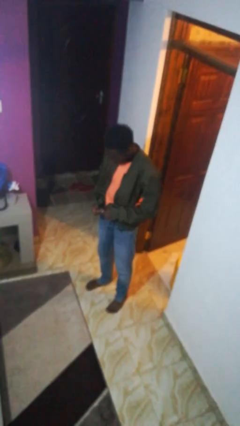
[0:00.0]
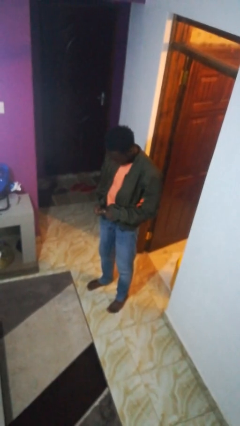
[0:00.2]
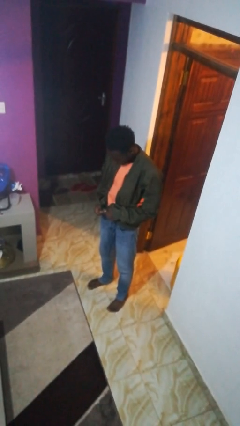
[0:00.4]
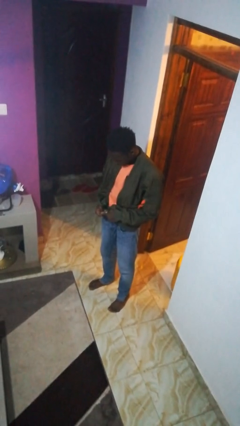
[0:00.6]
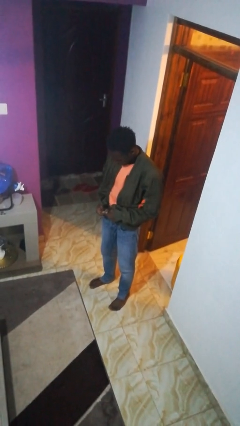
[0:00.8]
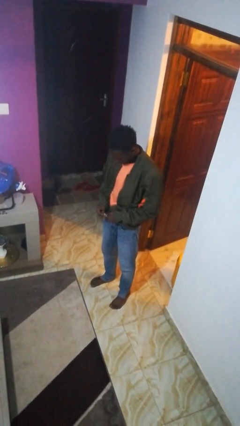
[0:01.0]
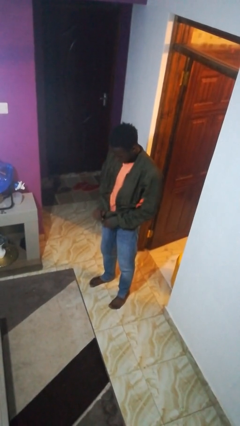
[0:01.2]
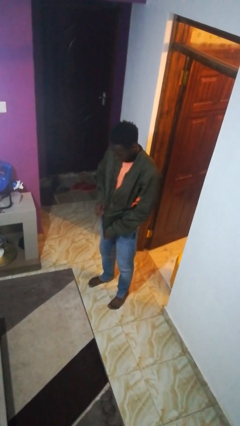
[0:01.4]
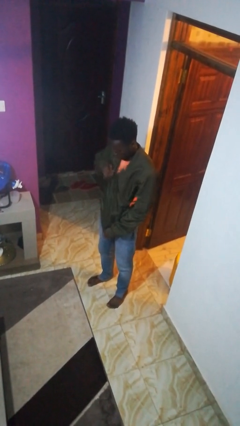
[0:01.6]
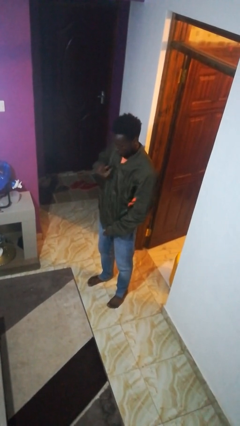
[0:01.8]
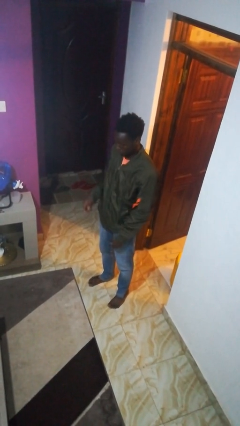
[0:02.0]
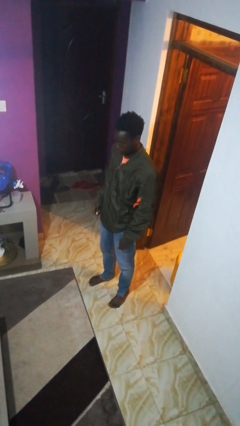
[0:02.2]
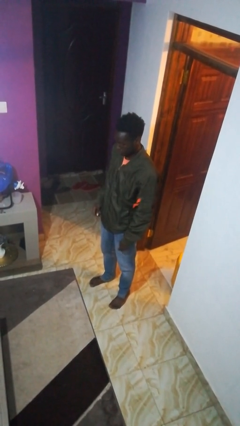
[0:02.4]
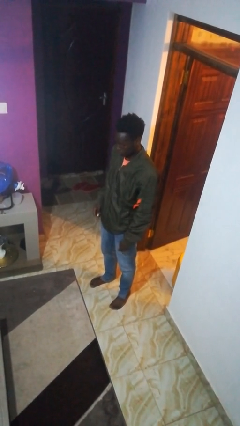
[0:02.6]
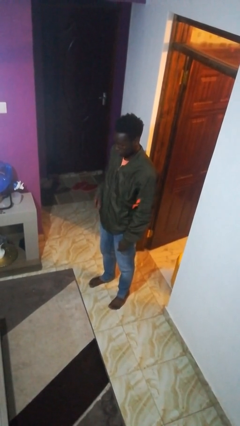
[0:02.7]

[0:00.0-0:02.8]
person zips up jacket

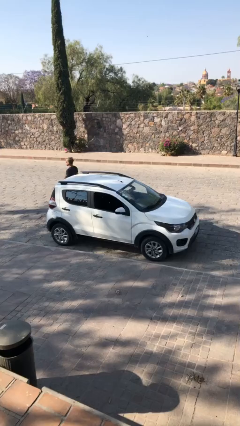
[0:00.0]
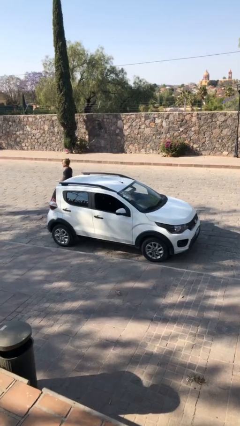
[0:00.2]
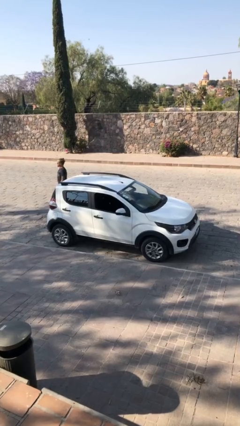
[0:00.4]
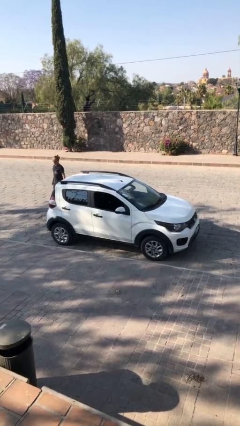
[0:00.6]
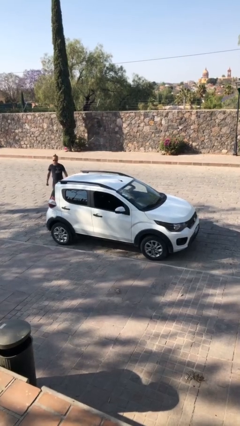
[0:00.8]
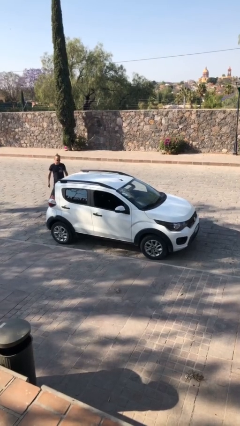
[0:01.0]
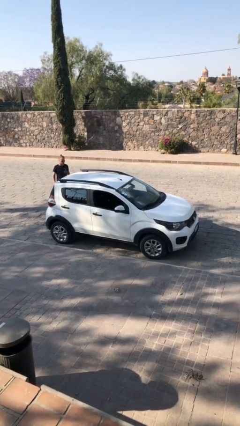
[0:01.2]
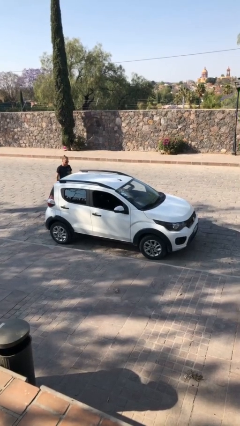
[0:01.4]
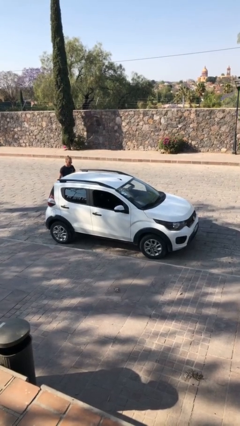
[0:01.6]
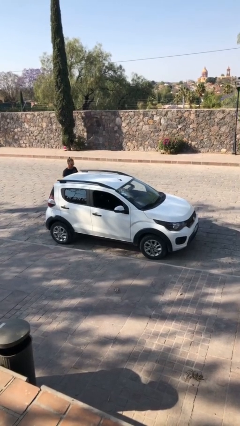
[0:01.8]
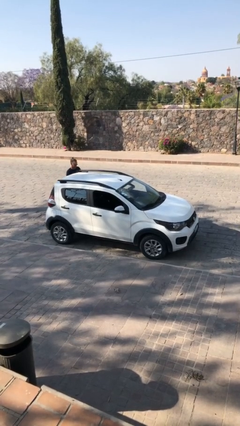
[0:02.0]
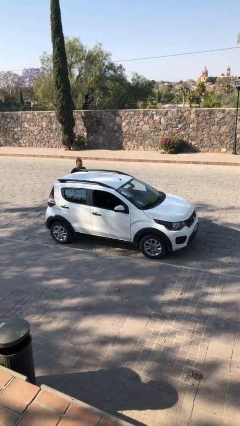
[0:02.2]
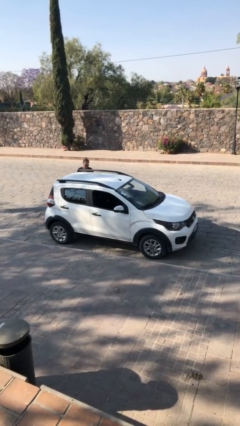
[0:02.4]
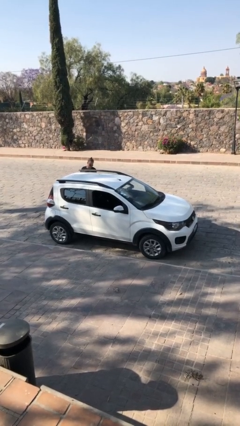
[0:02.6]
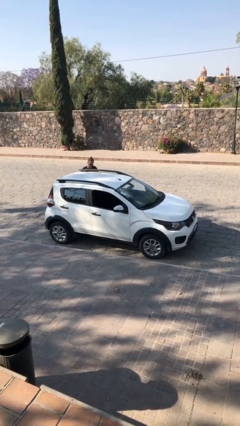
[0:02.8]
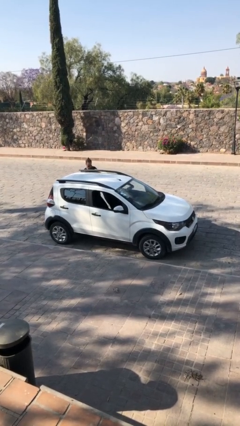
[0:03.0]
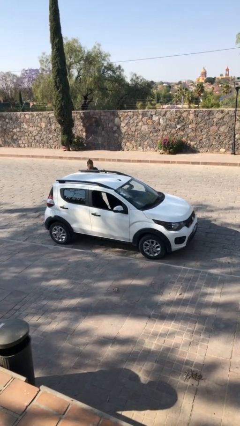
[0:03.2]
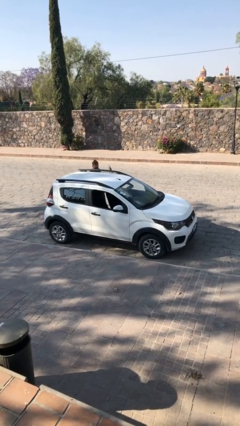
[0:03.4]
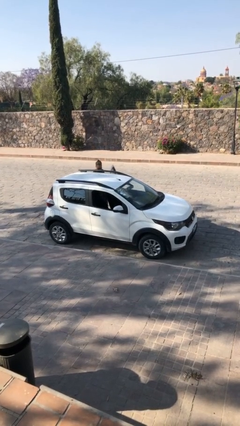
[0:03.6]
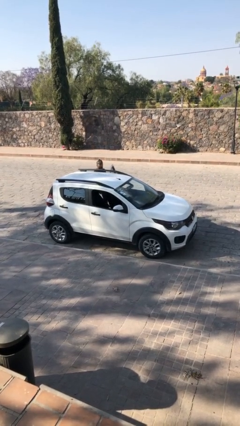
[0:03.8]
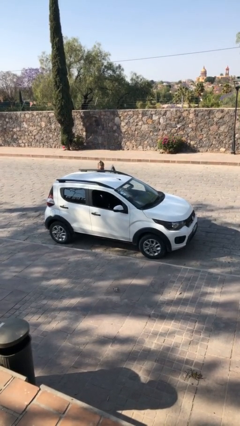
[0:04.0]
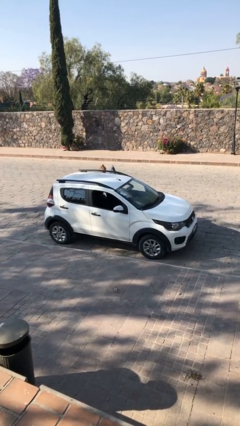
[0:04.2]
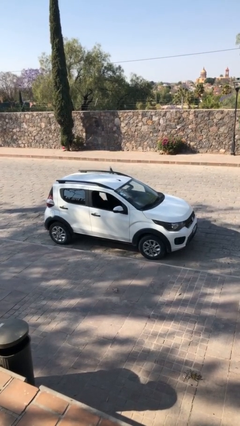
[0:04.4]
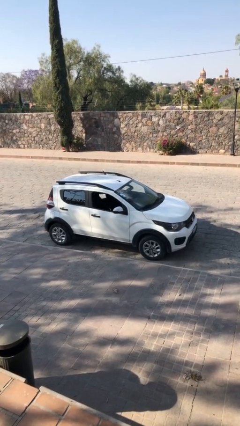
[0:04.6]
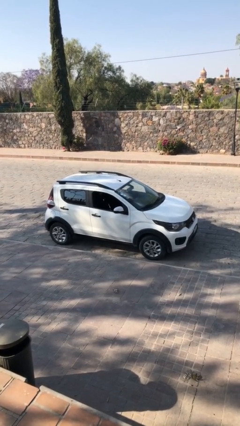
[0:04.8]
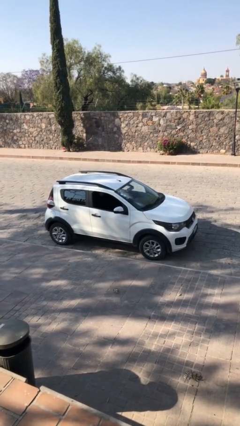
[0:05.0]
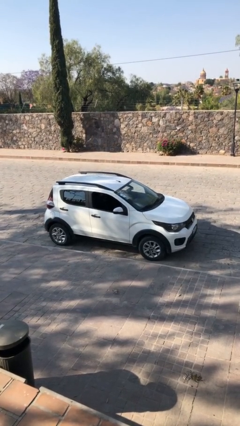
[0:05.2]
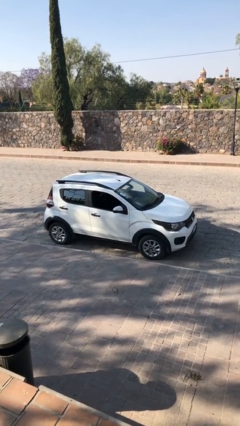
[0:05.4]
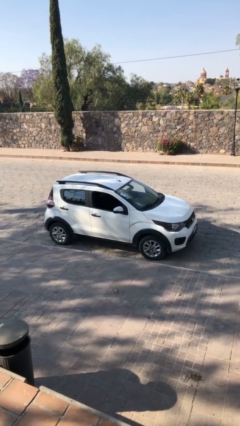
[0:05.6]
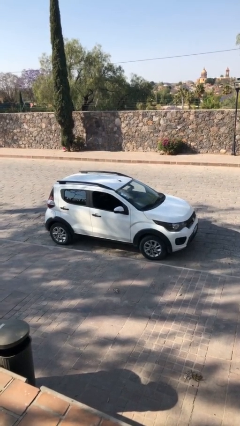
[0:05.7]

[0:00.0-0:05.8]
car picks up person

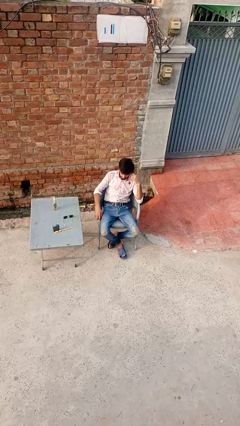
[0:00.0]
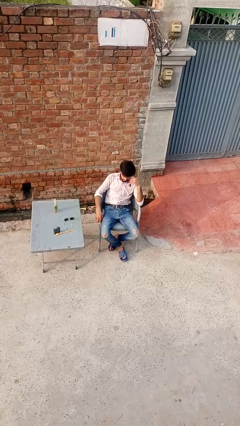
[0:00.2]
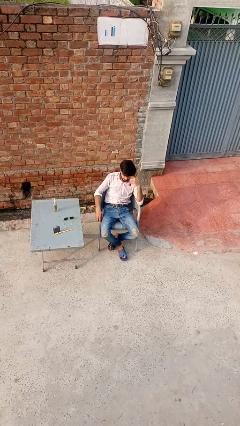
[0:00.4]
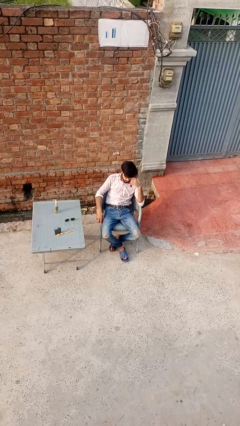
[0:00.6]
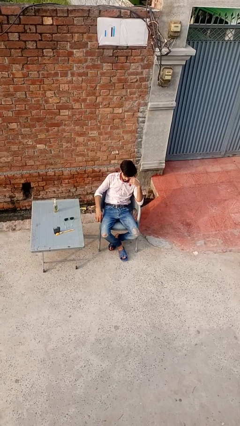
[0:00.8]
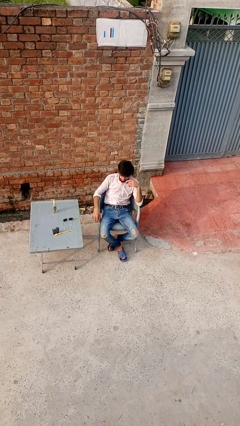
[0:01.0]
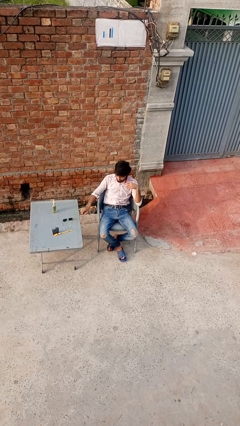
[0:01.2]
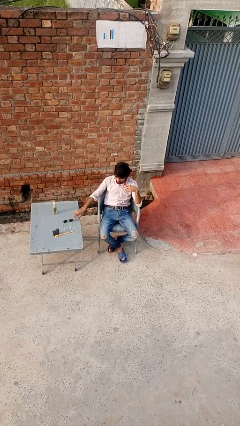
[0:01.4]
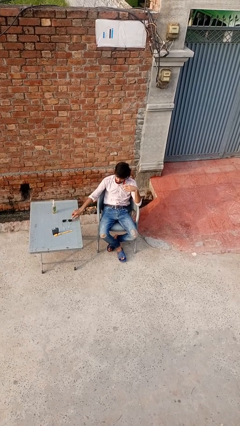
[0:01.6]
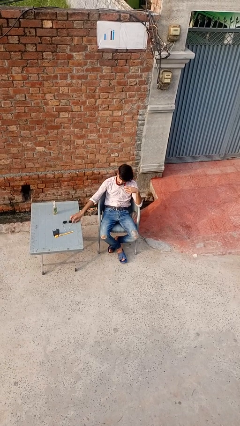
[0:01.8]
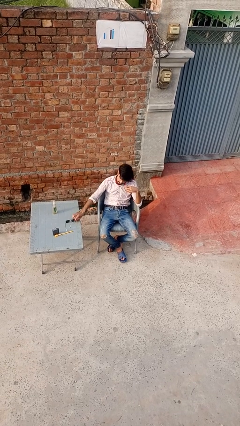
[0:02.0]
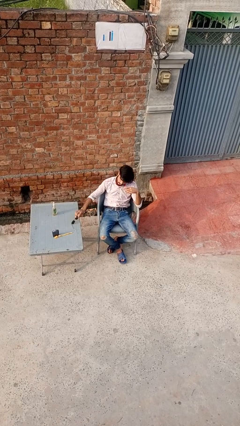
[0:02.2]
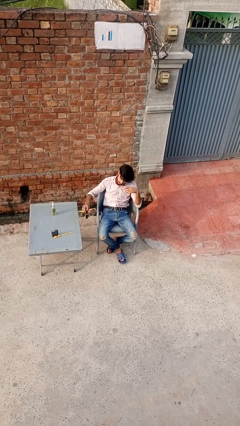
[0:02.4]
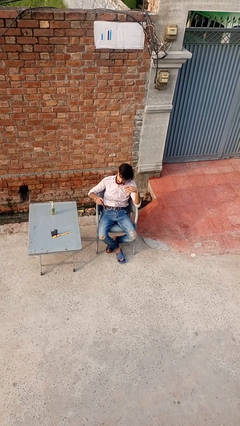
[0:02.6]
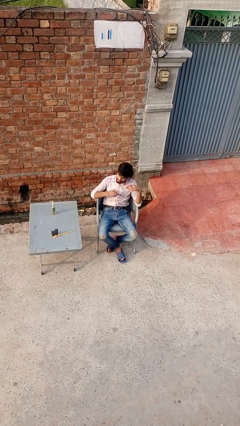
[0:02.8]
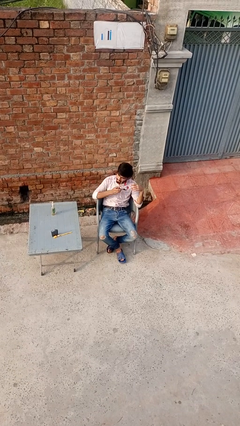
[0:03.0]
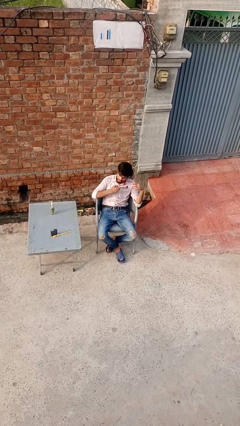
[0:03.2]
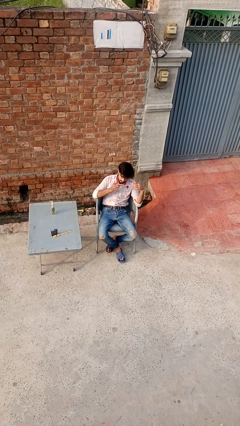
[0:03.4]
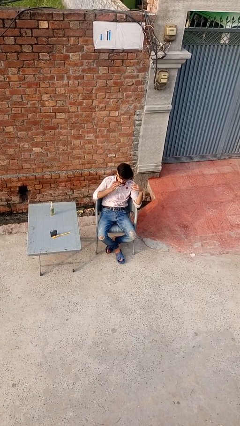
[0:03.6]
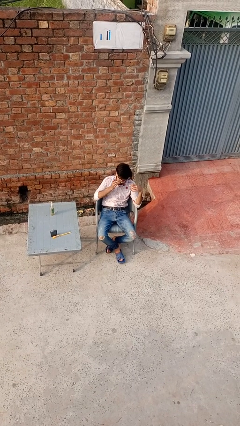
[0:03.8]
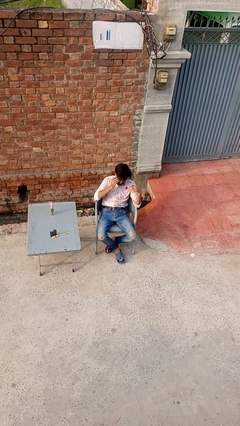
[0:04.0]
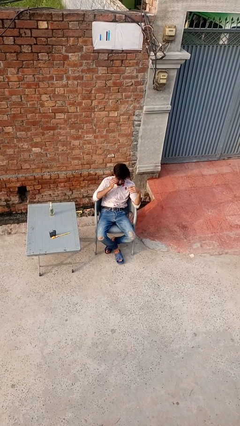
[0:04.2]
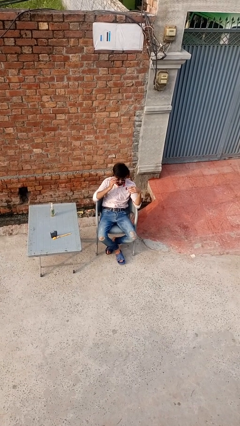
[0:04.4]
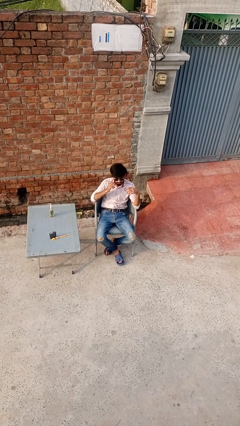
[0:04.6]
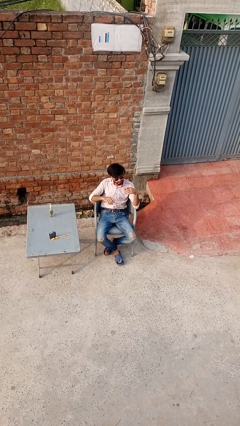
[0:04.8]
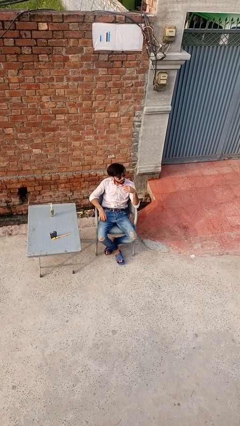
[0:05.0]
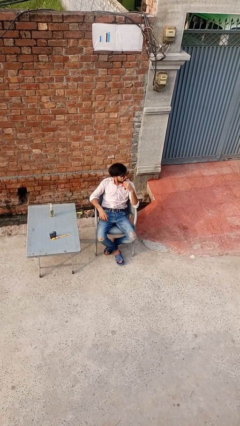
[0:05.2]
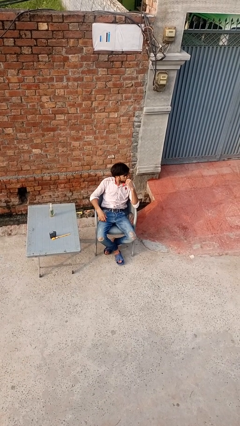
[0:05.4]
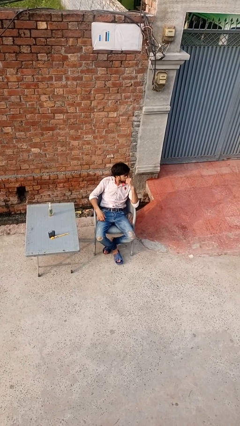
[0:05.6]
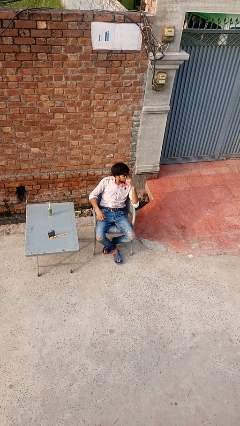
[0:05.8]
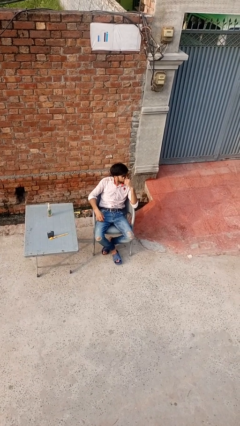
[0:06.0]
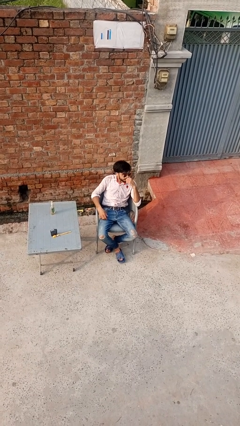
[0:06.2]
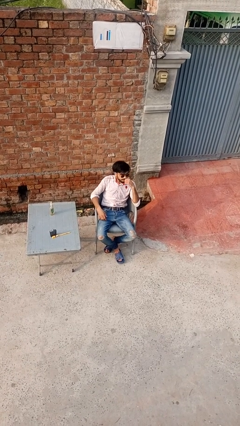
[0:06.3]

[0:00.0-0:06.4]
person puts on sunglasses

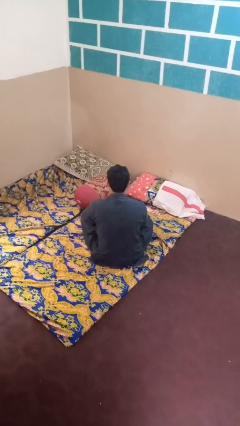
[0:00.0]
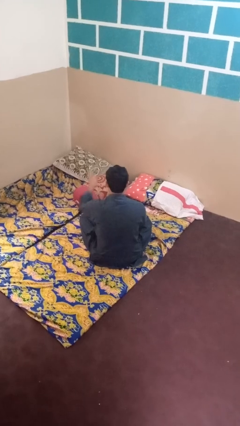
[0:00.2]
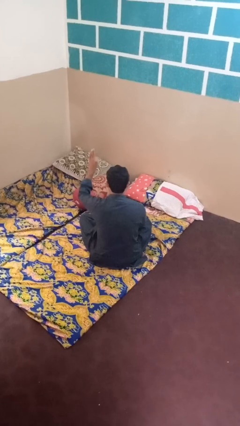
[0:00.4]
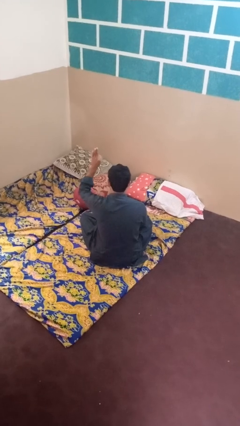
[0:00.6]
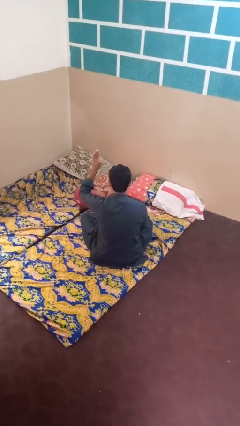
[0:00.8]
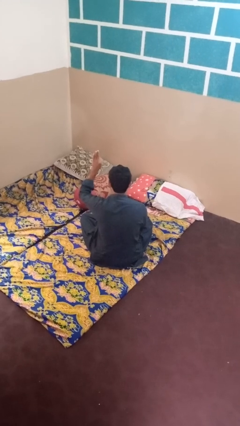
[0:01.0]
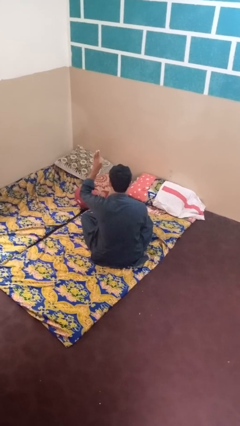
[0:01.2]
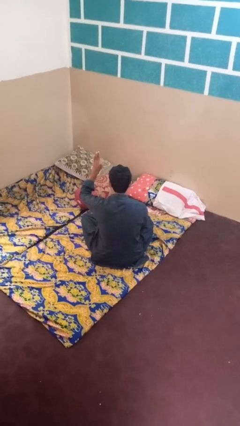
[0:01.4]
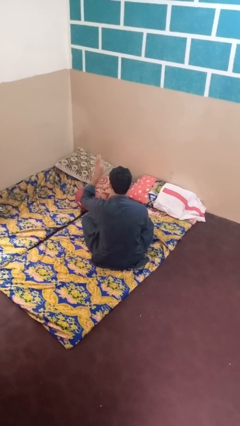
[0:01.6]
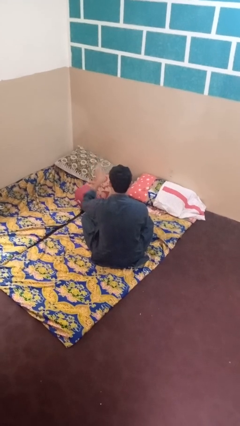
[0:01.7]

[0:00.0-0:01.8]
person gestures number three

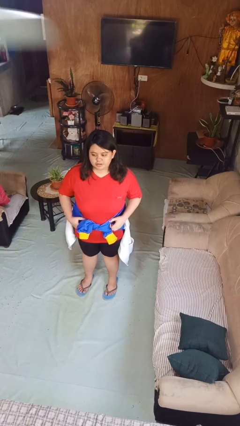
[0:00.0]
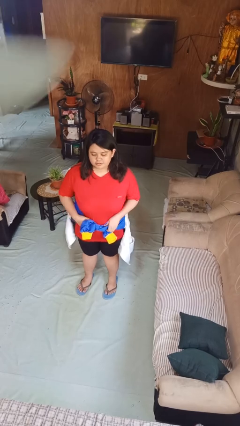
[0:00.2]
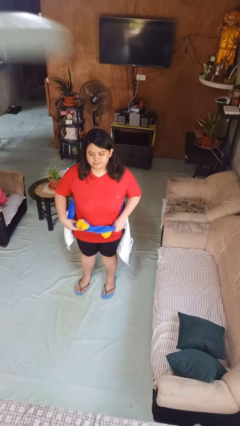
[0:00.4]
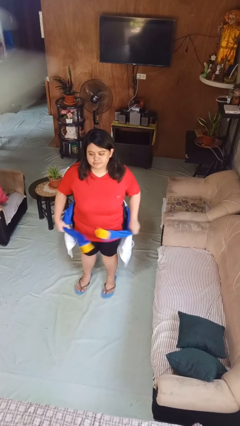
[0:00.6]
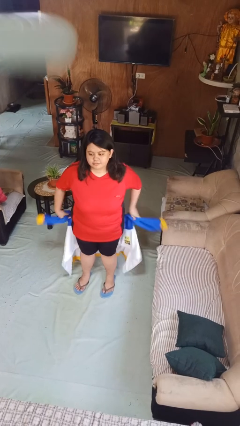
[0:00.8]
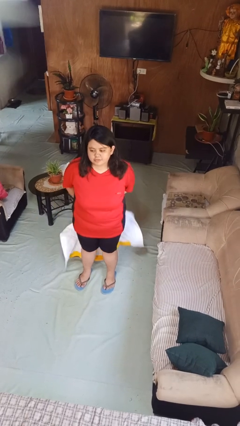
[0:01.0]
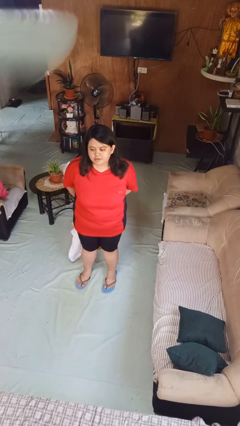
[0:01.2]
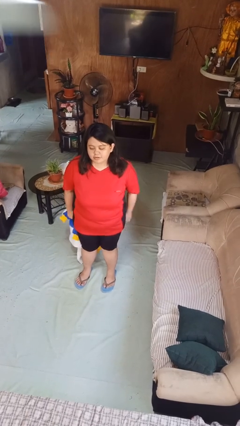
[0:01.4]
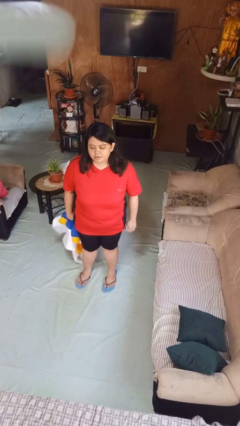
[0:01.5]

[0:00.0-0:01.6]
person unties jacket around waist
